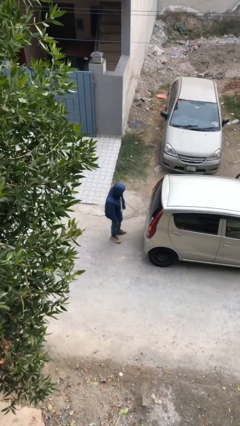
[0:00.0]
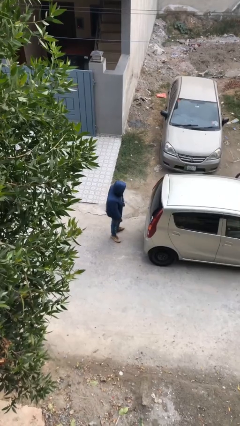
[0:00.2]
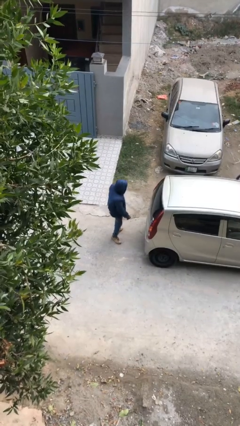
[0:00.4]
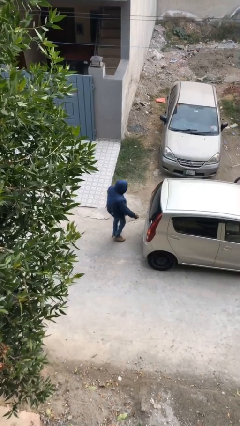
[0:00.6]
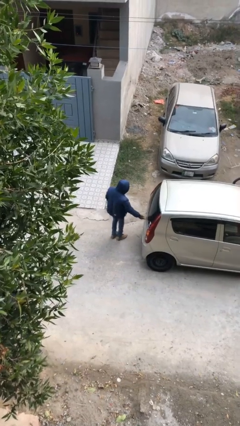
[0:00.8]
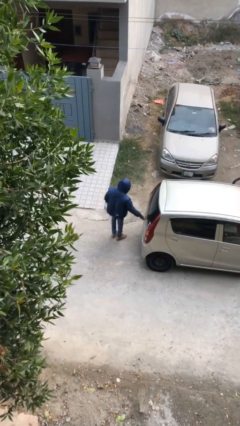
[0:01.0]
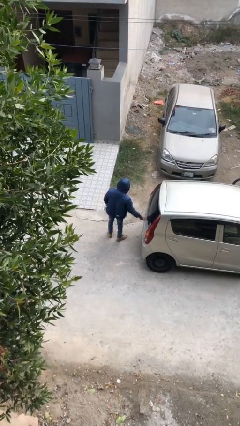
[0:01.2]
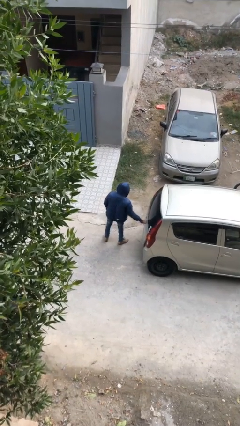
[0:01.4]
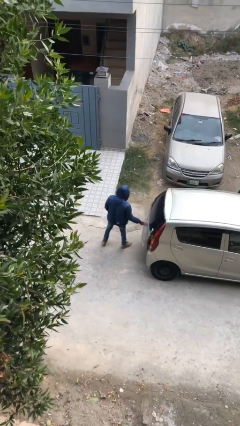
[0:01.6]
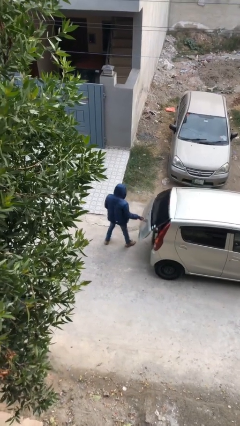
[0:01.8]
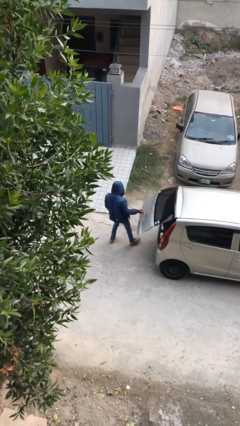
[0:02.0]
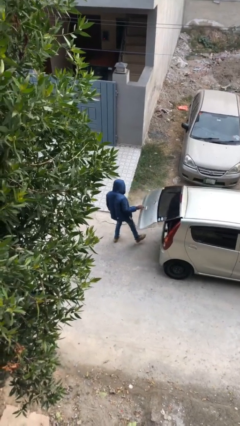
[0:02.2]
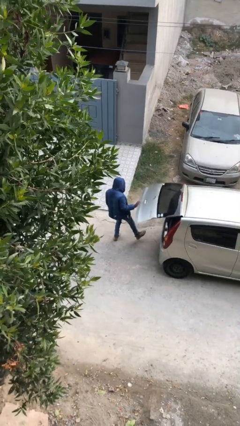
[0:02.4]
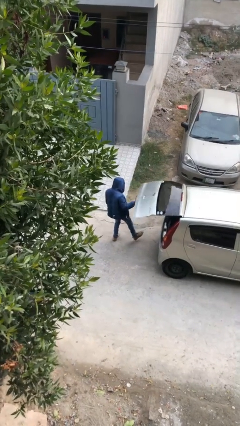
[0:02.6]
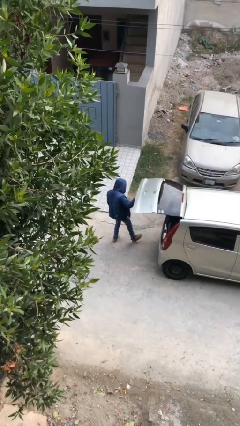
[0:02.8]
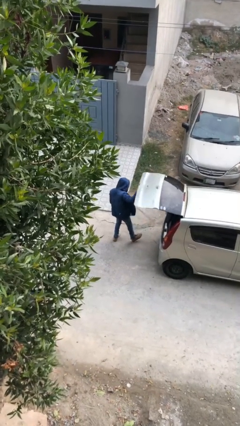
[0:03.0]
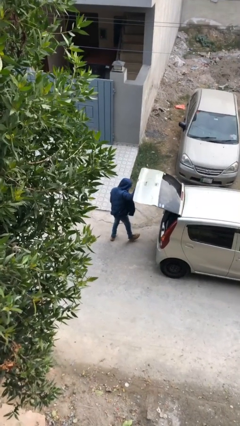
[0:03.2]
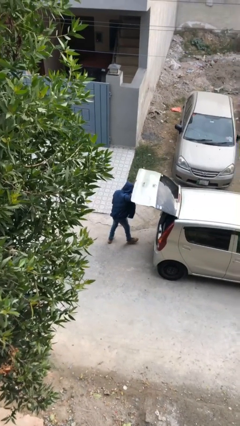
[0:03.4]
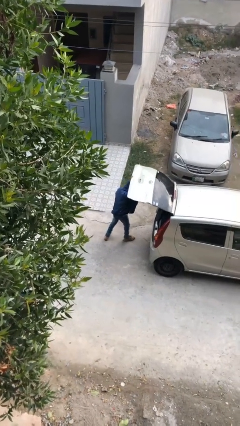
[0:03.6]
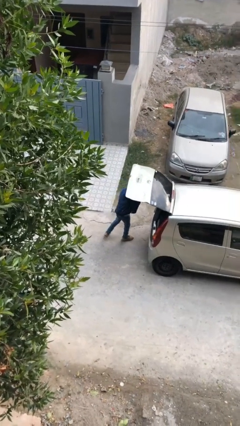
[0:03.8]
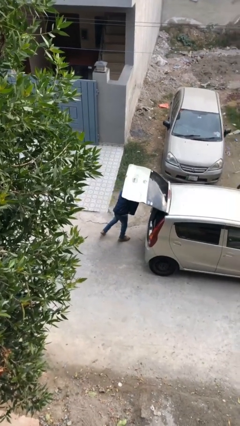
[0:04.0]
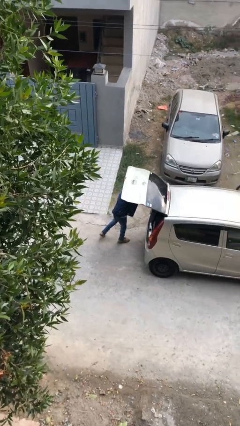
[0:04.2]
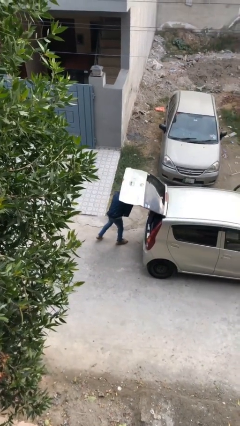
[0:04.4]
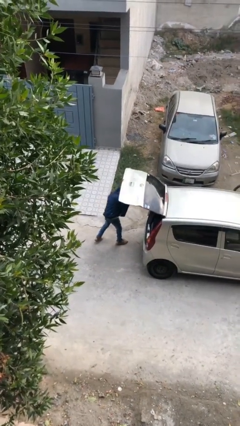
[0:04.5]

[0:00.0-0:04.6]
person opens car trunk

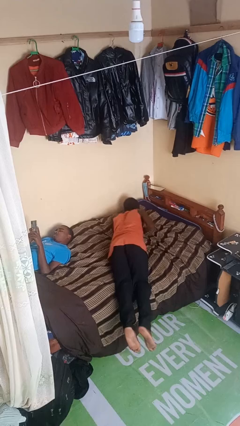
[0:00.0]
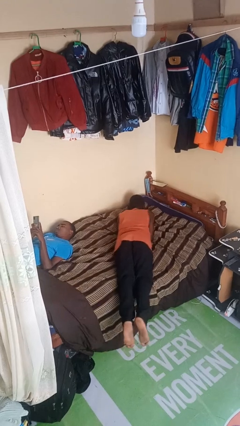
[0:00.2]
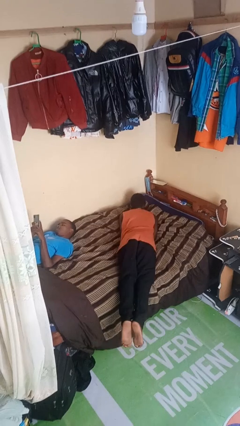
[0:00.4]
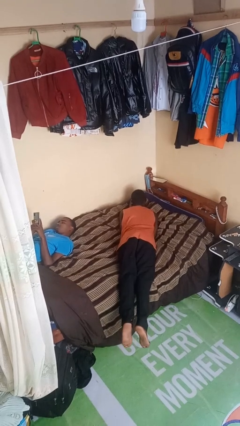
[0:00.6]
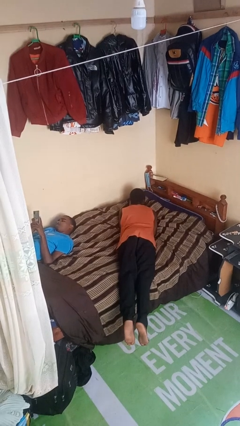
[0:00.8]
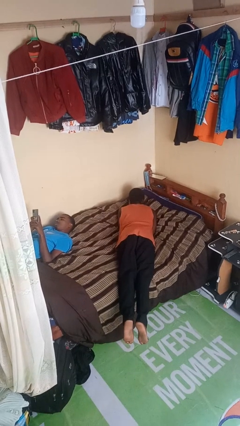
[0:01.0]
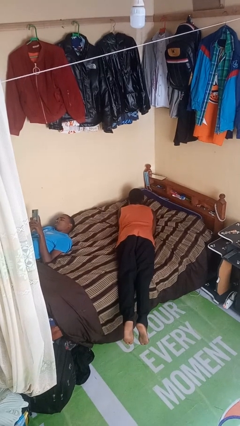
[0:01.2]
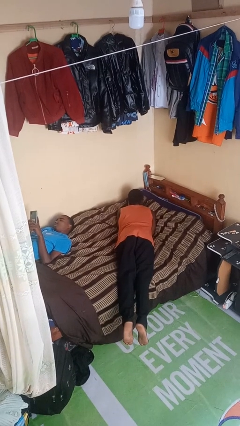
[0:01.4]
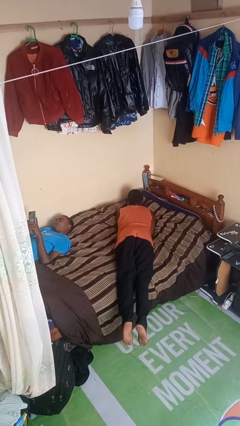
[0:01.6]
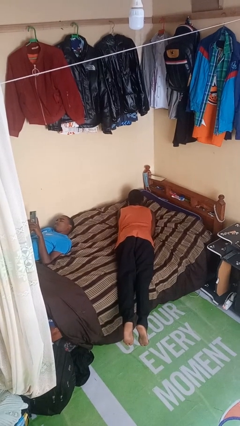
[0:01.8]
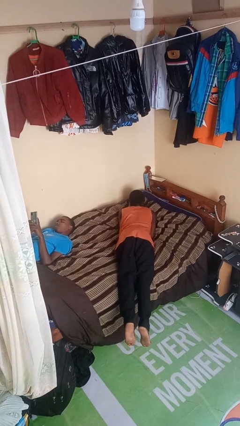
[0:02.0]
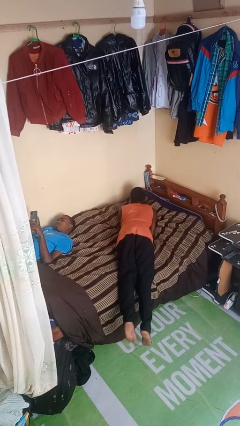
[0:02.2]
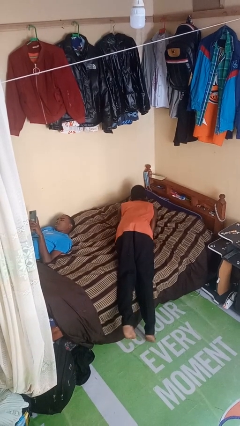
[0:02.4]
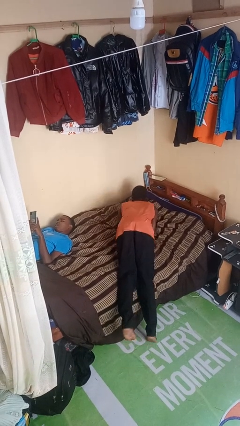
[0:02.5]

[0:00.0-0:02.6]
person lies down on bed

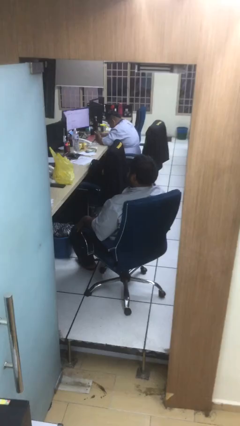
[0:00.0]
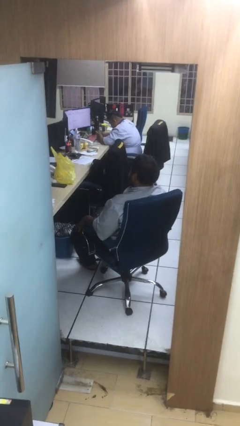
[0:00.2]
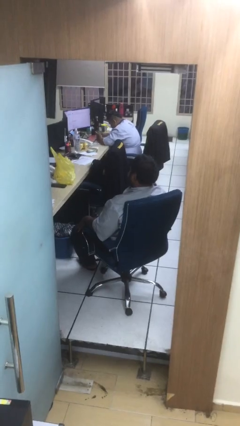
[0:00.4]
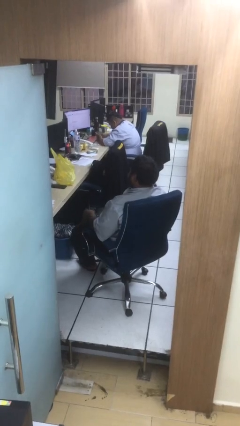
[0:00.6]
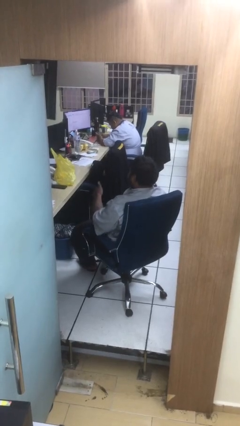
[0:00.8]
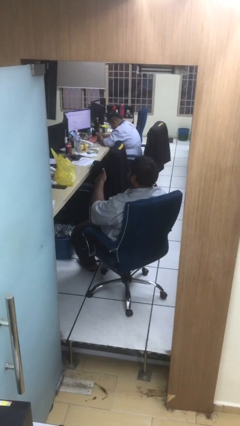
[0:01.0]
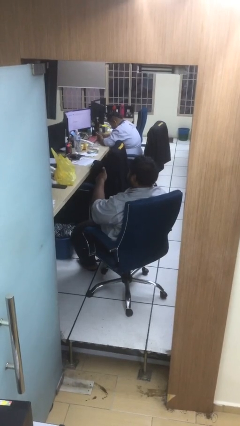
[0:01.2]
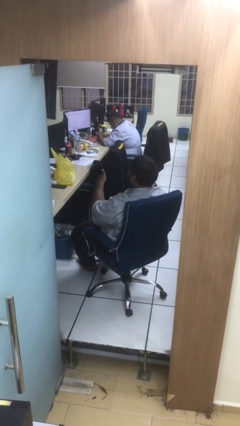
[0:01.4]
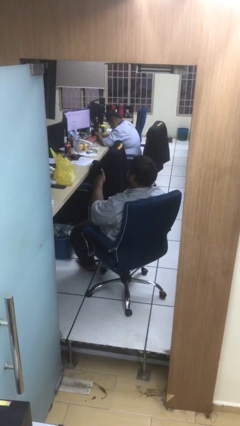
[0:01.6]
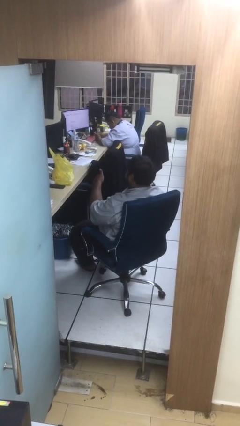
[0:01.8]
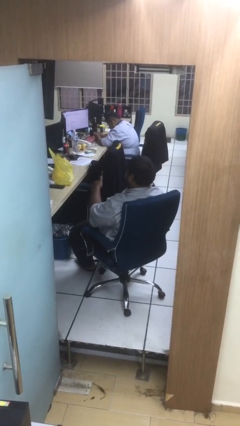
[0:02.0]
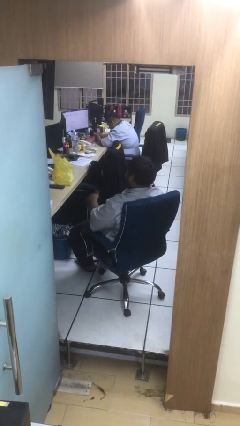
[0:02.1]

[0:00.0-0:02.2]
person gestures thumbs up

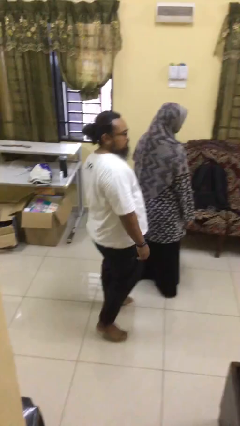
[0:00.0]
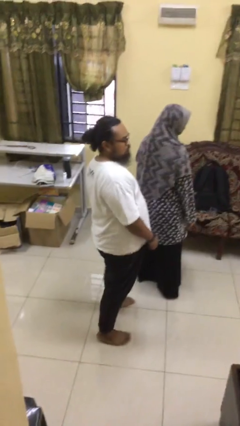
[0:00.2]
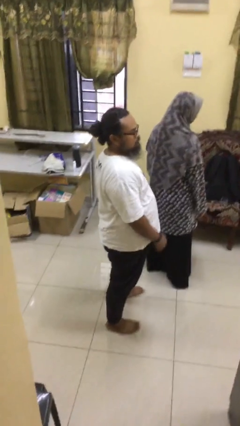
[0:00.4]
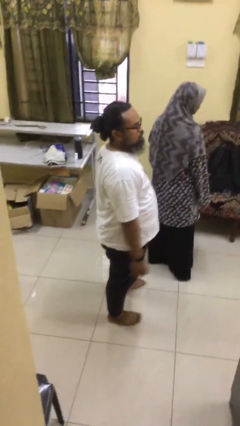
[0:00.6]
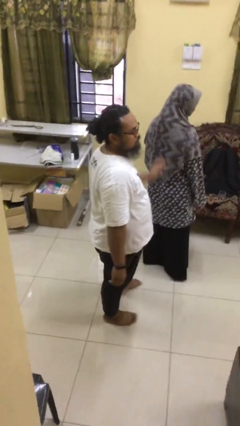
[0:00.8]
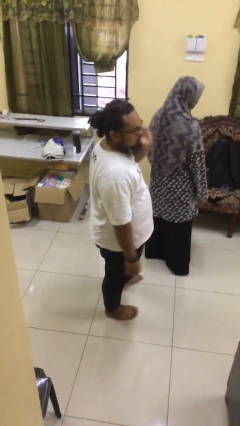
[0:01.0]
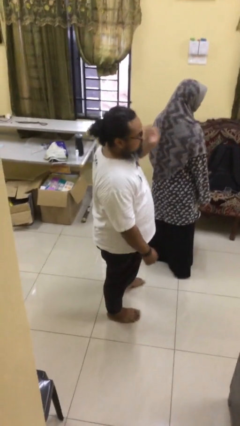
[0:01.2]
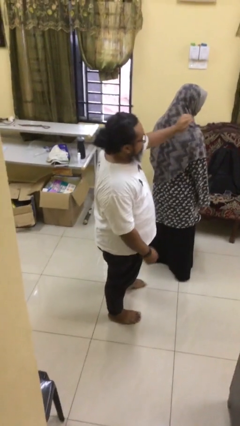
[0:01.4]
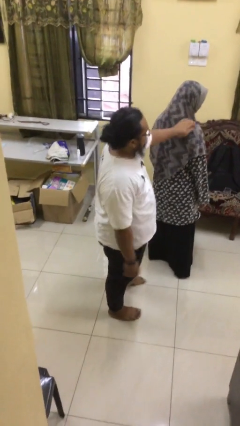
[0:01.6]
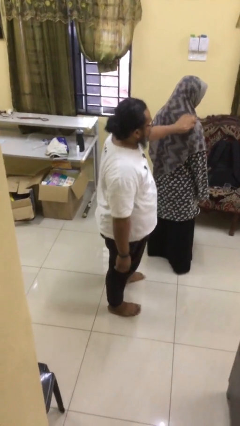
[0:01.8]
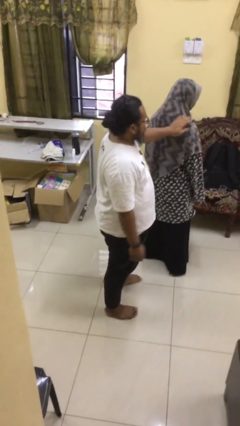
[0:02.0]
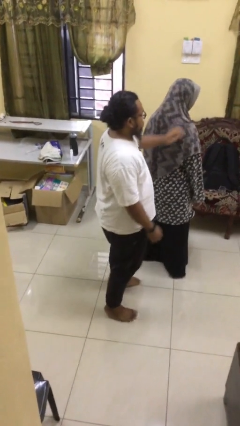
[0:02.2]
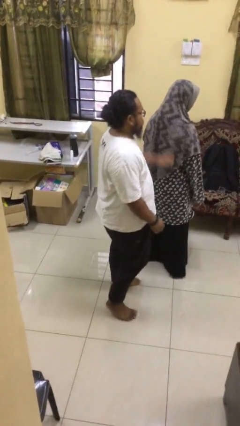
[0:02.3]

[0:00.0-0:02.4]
person touches back of person

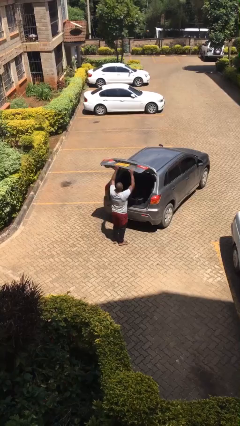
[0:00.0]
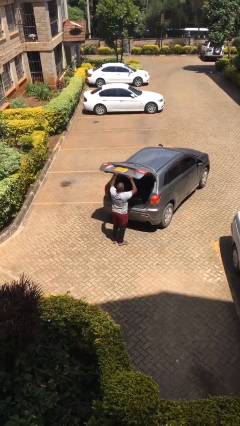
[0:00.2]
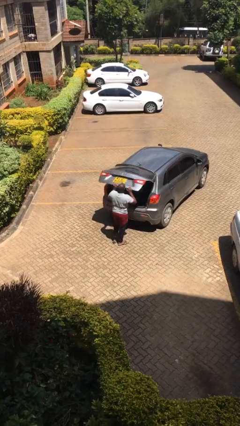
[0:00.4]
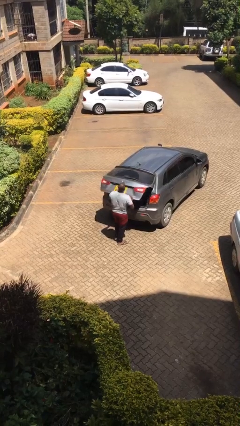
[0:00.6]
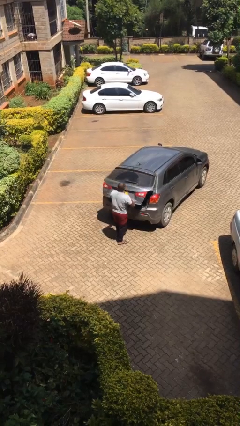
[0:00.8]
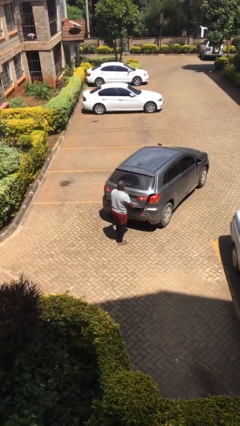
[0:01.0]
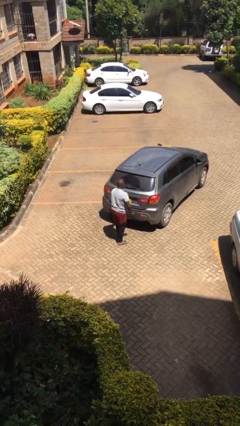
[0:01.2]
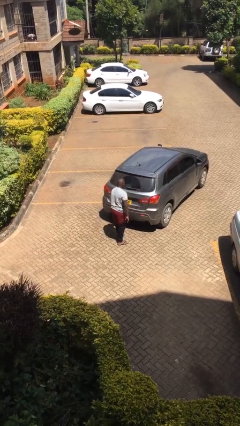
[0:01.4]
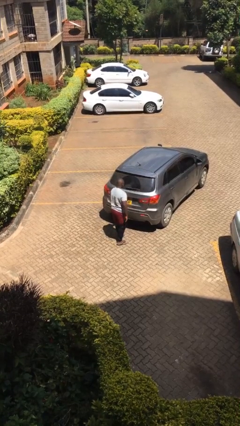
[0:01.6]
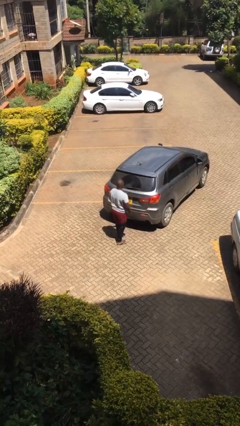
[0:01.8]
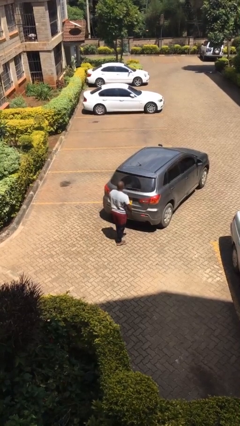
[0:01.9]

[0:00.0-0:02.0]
person closes car trunk

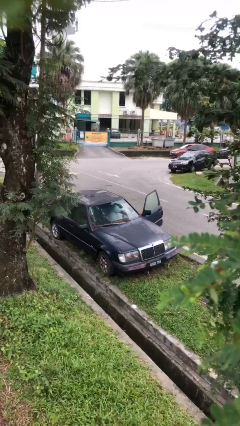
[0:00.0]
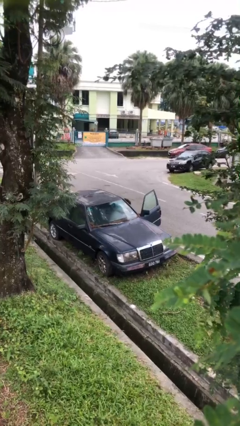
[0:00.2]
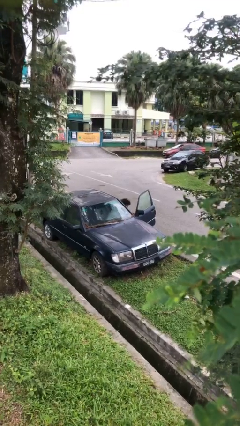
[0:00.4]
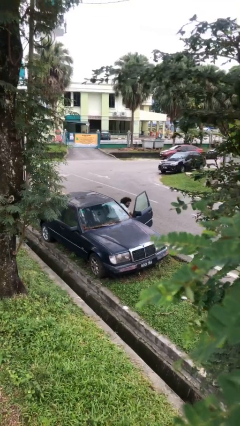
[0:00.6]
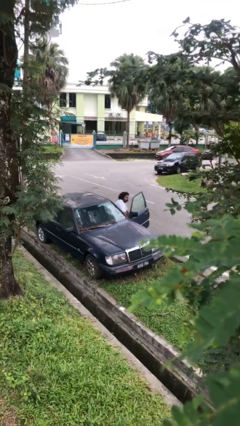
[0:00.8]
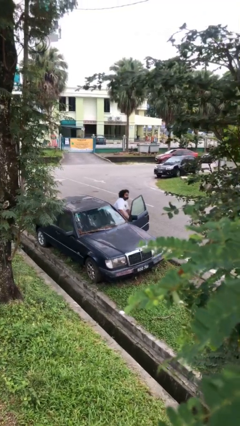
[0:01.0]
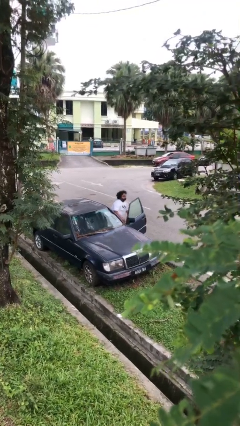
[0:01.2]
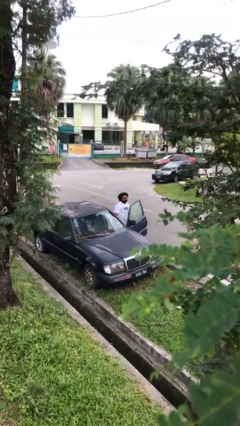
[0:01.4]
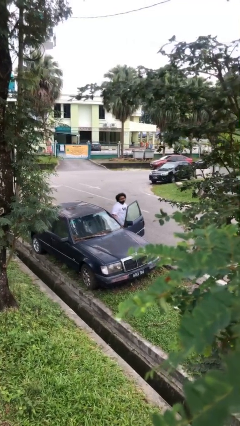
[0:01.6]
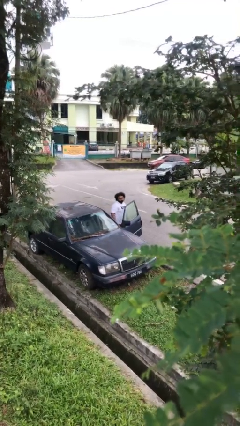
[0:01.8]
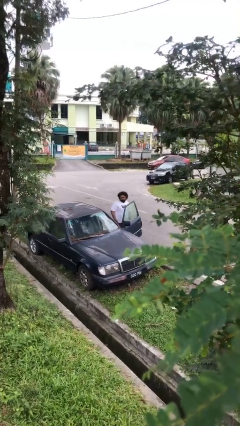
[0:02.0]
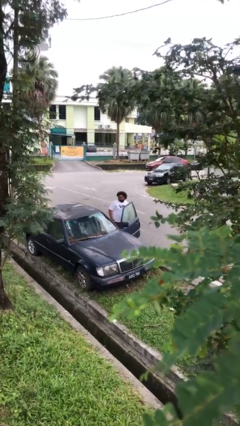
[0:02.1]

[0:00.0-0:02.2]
person exits car

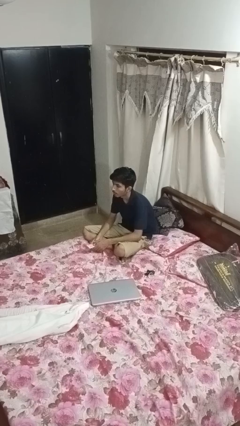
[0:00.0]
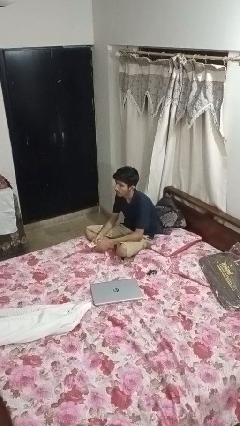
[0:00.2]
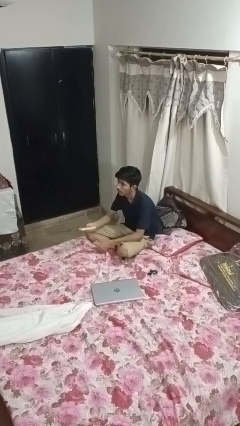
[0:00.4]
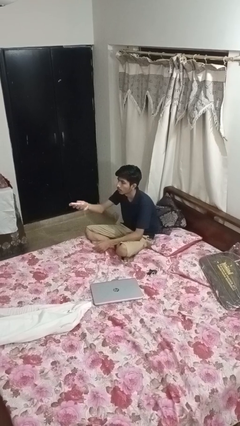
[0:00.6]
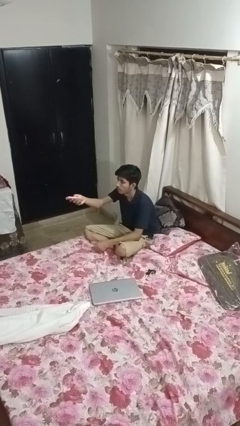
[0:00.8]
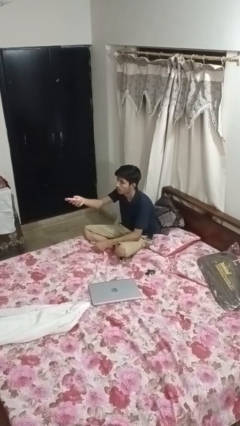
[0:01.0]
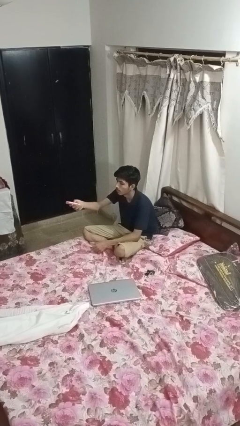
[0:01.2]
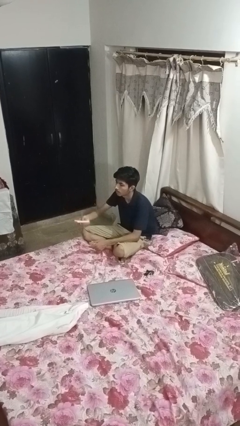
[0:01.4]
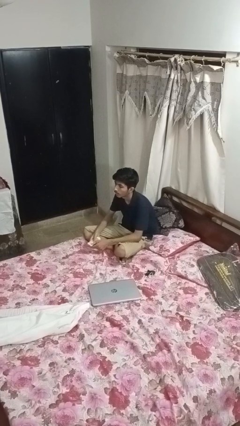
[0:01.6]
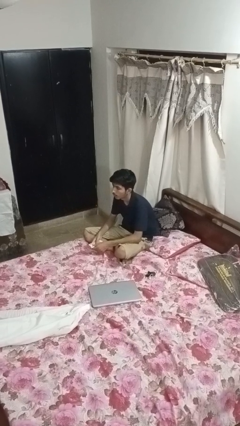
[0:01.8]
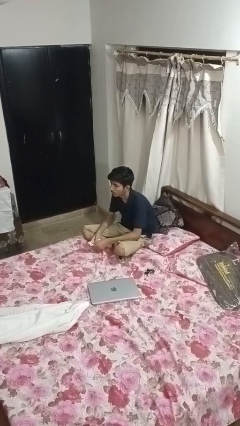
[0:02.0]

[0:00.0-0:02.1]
person uses television remote
